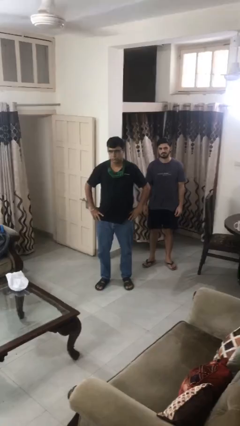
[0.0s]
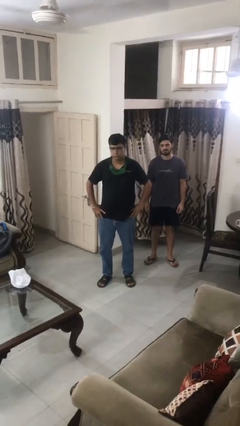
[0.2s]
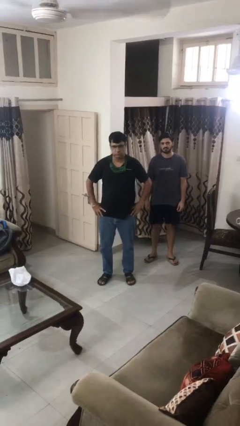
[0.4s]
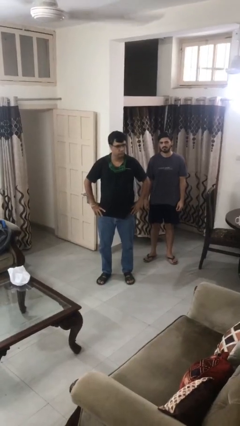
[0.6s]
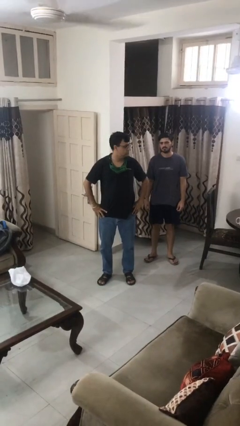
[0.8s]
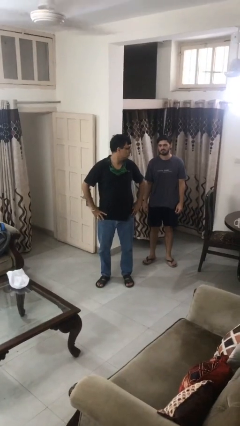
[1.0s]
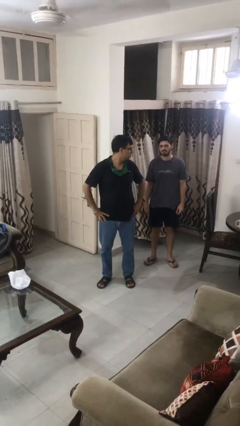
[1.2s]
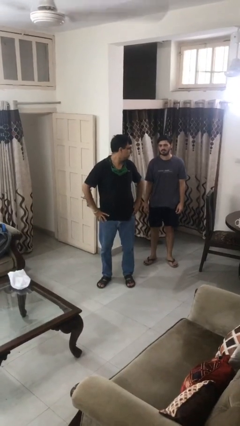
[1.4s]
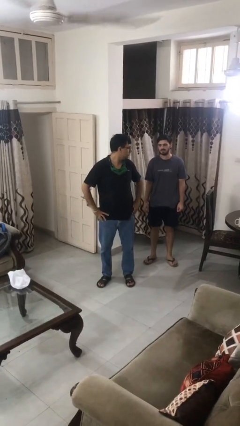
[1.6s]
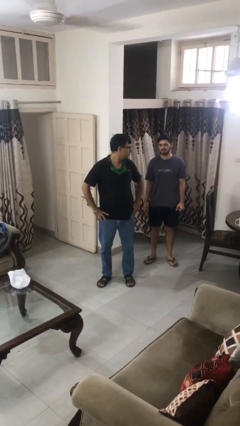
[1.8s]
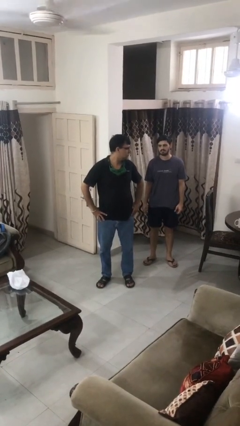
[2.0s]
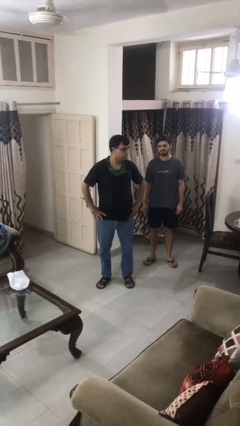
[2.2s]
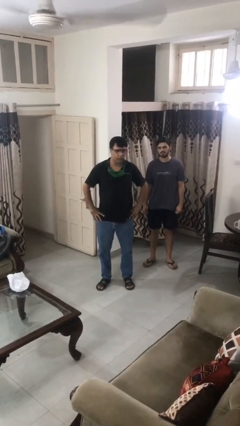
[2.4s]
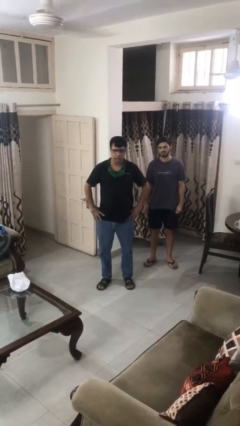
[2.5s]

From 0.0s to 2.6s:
person looks over shoulder

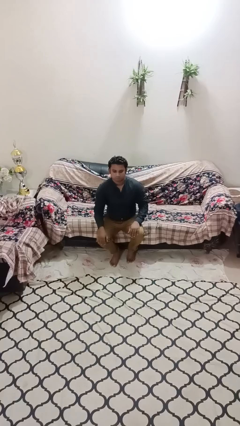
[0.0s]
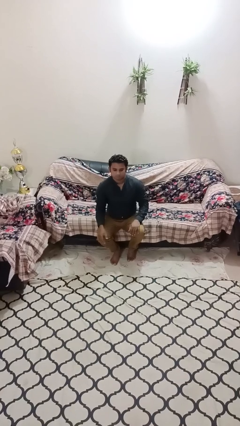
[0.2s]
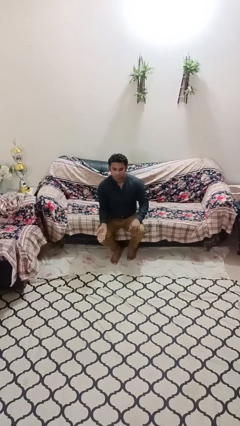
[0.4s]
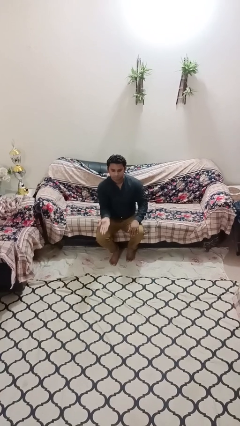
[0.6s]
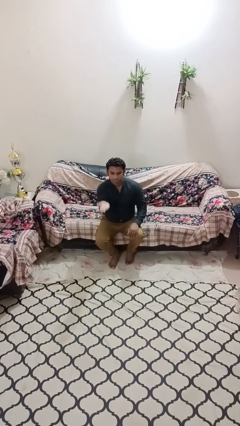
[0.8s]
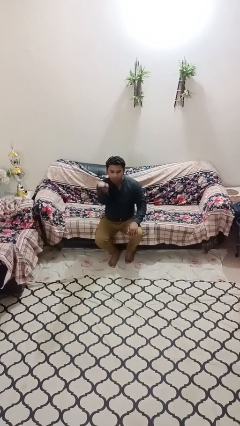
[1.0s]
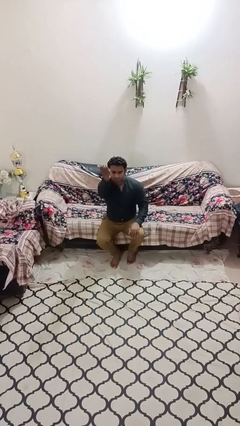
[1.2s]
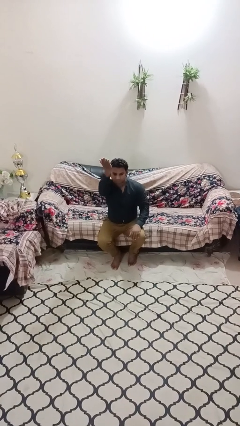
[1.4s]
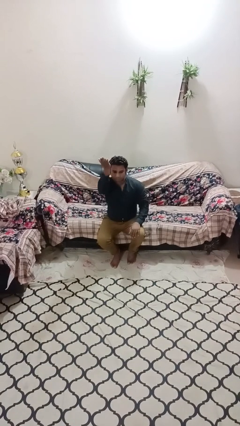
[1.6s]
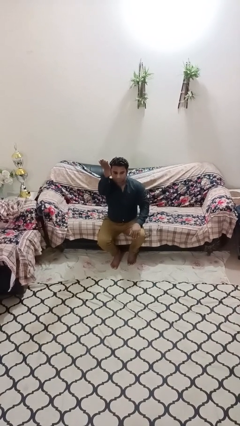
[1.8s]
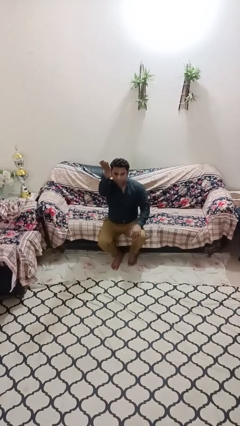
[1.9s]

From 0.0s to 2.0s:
person gestures swipe up

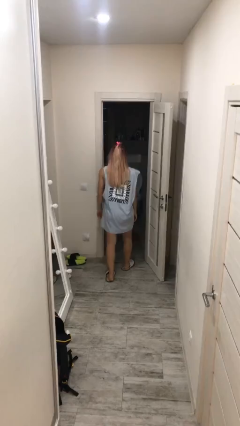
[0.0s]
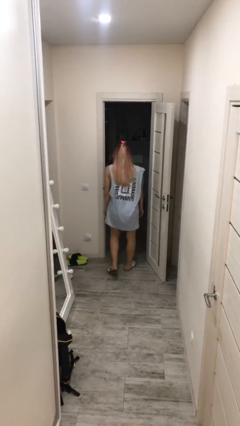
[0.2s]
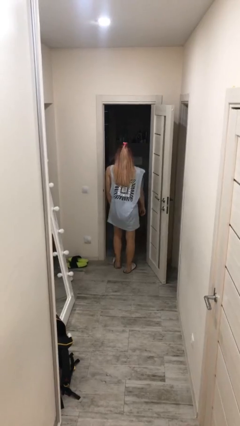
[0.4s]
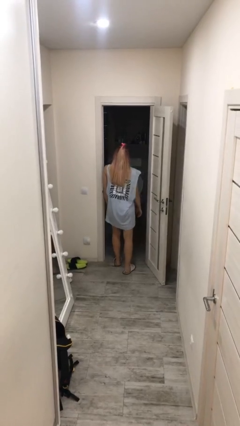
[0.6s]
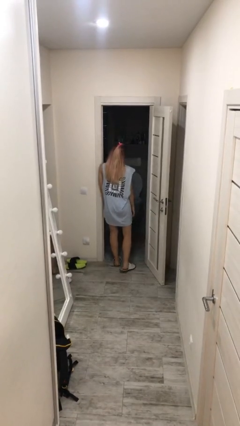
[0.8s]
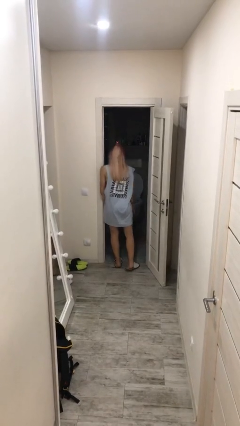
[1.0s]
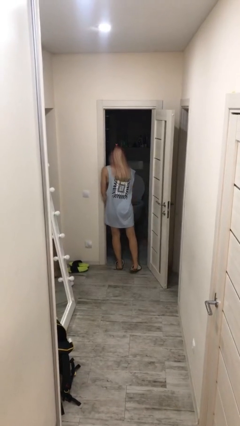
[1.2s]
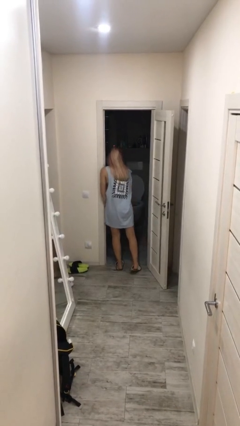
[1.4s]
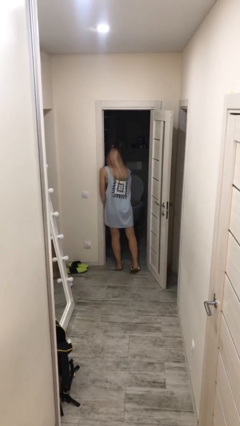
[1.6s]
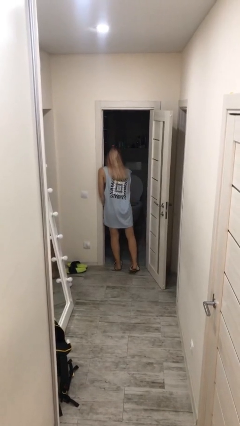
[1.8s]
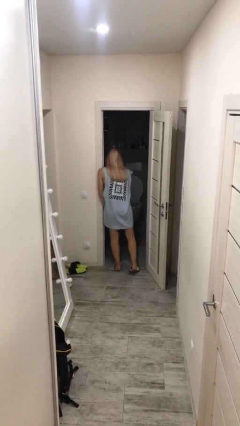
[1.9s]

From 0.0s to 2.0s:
person bumps into wall

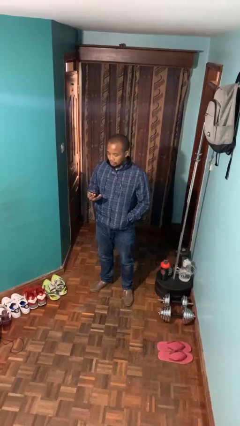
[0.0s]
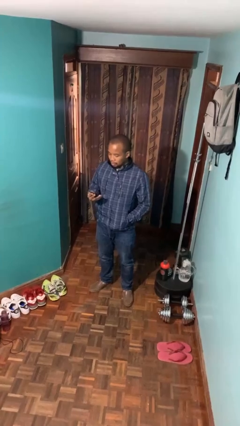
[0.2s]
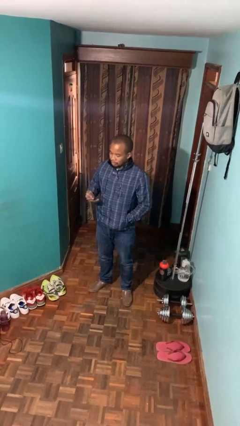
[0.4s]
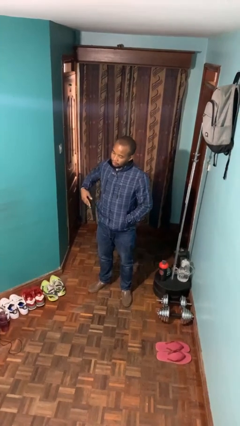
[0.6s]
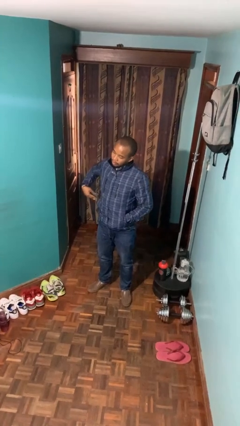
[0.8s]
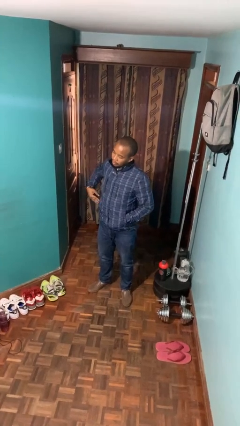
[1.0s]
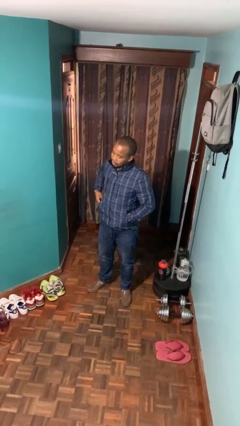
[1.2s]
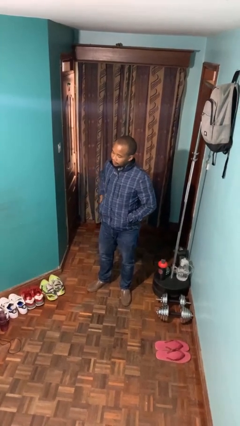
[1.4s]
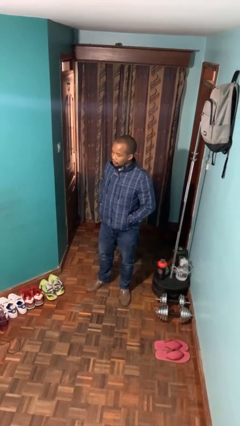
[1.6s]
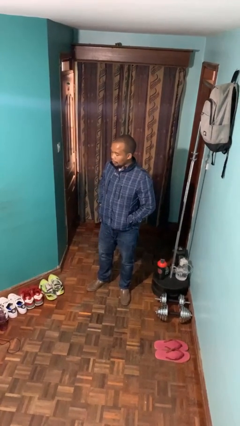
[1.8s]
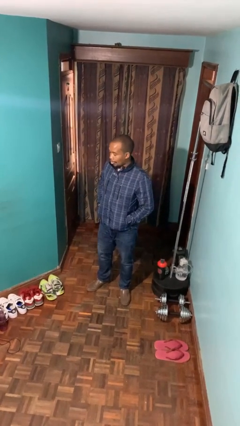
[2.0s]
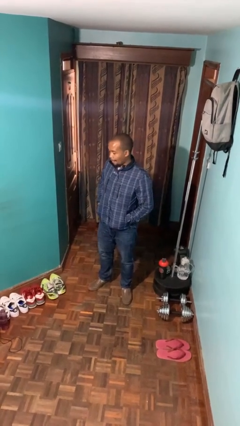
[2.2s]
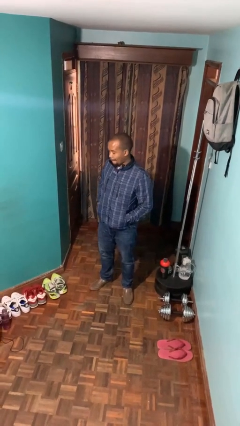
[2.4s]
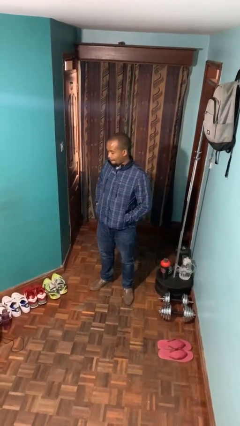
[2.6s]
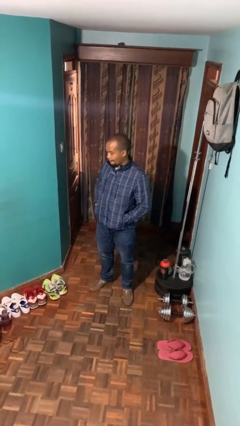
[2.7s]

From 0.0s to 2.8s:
person puts phone into pocket

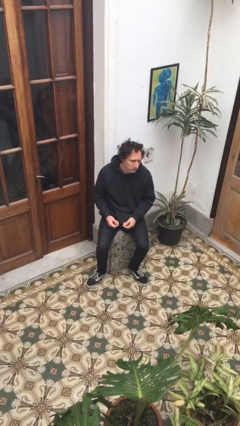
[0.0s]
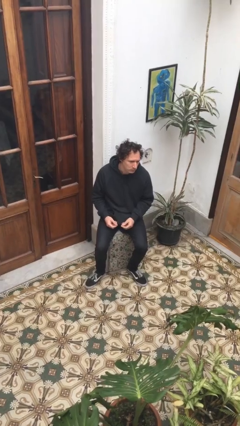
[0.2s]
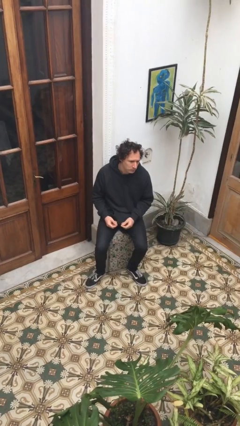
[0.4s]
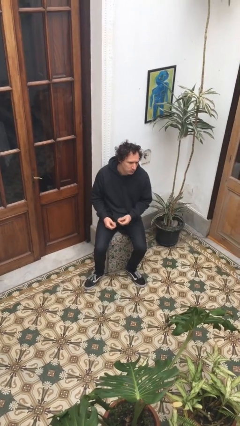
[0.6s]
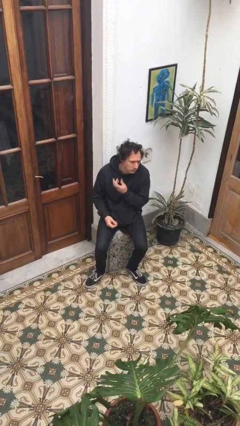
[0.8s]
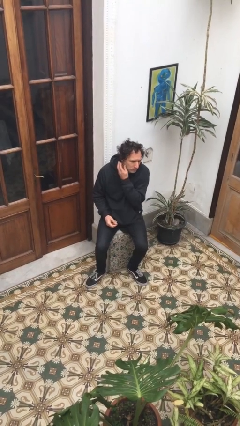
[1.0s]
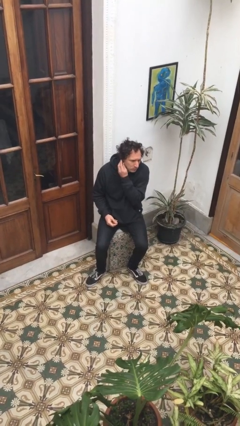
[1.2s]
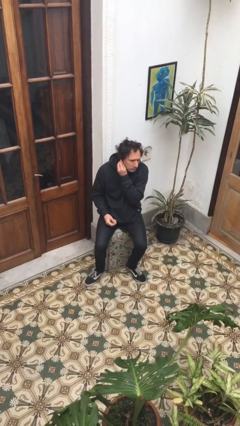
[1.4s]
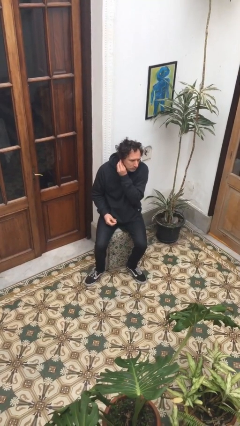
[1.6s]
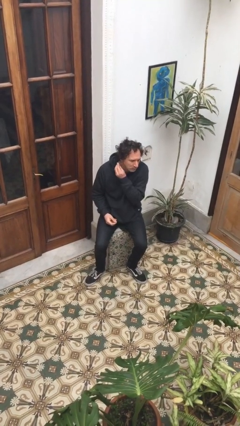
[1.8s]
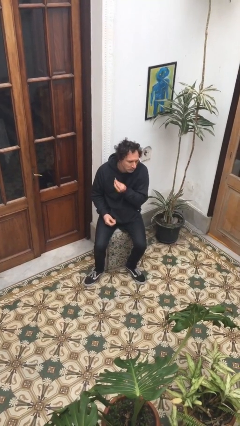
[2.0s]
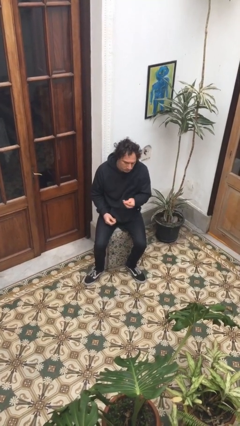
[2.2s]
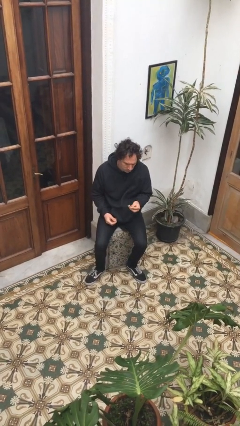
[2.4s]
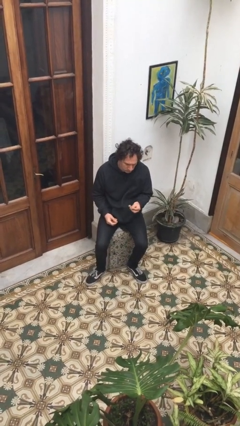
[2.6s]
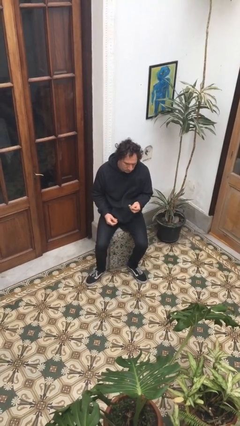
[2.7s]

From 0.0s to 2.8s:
person takes off earrings

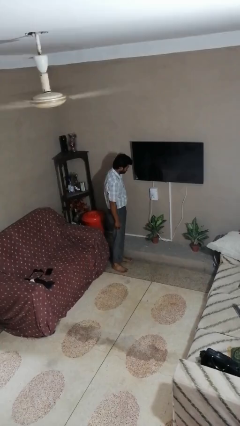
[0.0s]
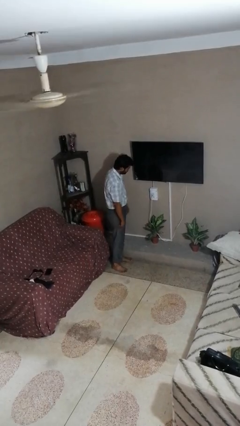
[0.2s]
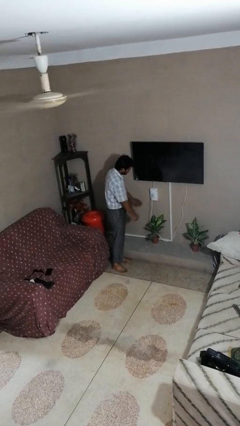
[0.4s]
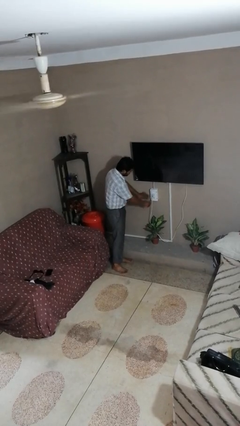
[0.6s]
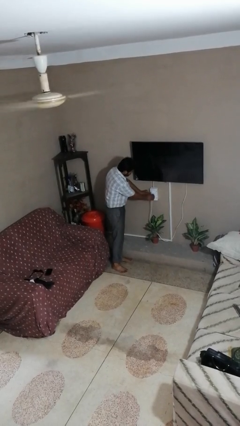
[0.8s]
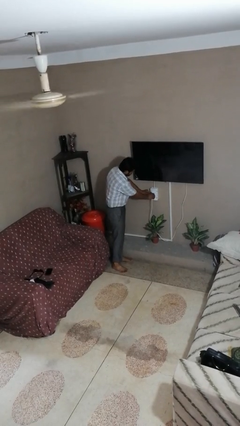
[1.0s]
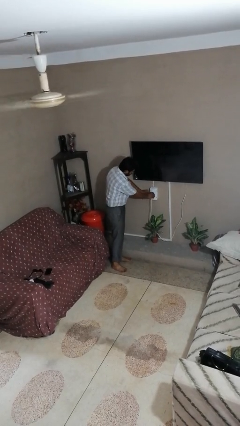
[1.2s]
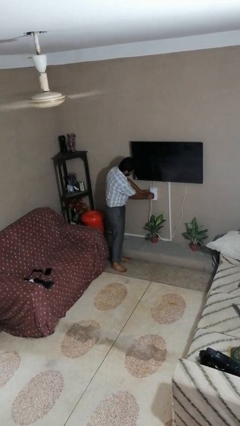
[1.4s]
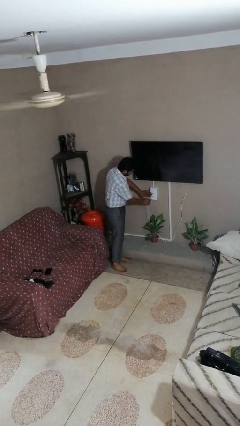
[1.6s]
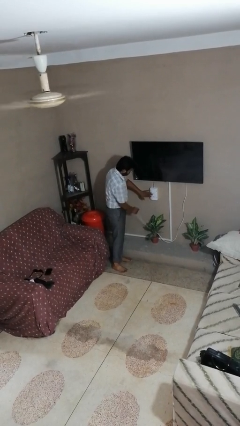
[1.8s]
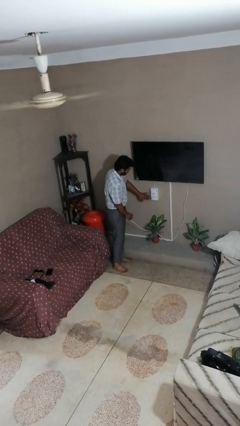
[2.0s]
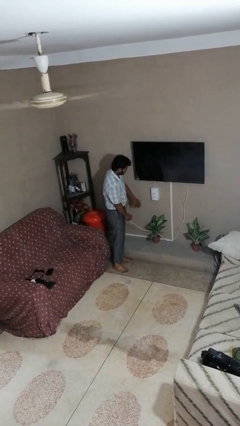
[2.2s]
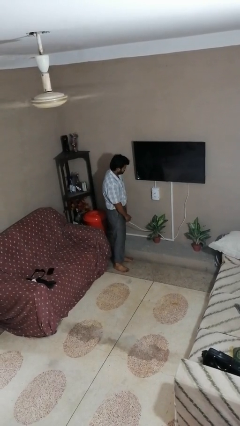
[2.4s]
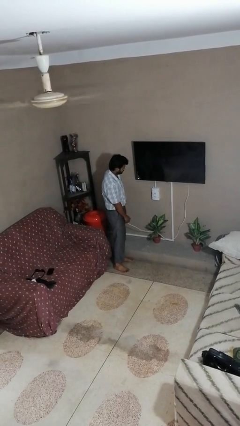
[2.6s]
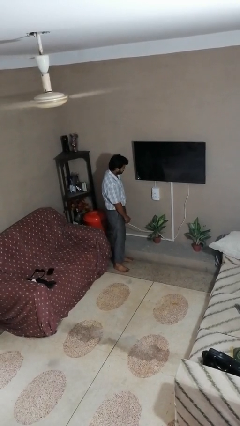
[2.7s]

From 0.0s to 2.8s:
person unplugs from electrical socket

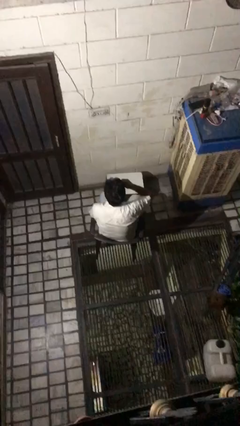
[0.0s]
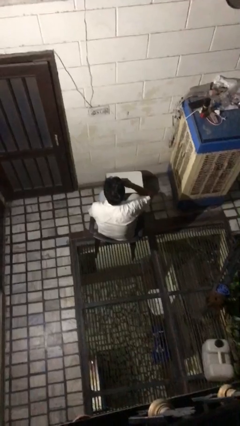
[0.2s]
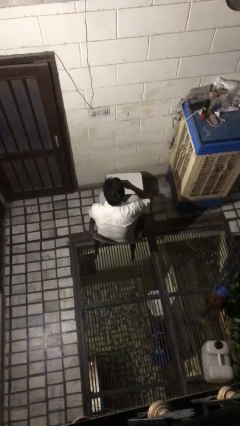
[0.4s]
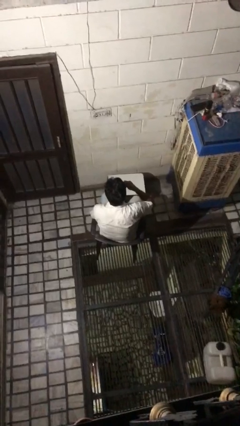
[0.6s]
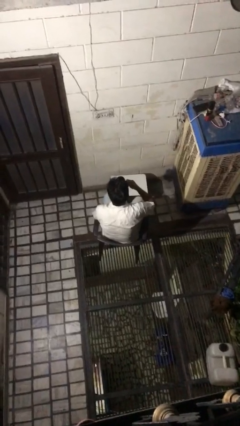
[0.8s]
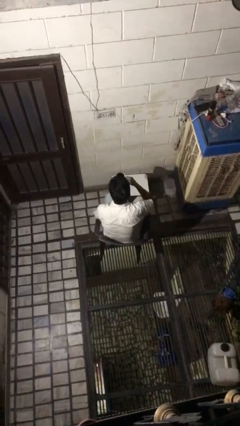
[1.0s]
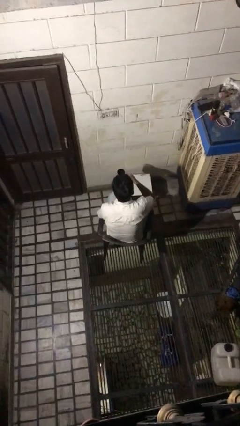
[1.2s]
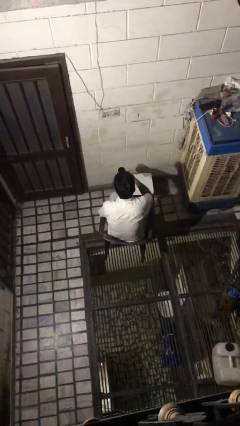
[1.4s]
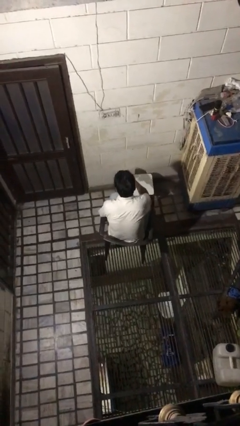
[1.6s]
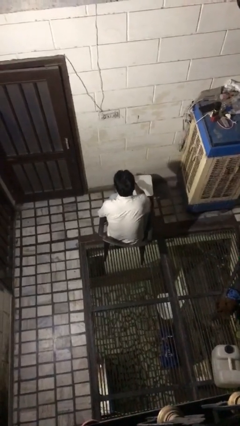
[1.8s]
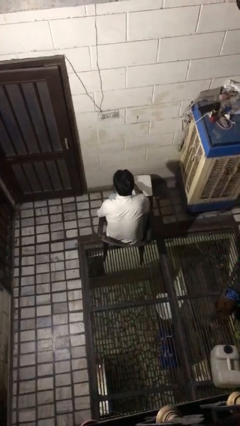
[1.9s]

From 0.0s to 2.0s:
person puts down object on table
